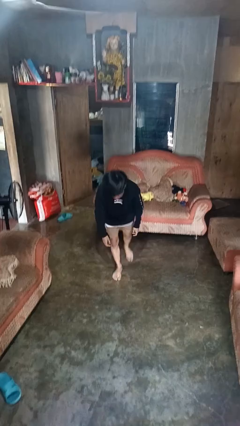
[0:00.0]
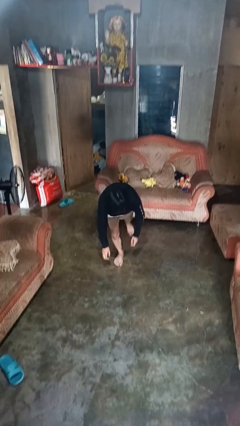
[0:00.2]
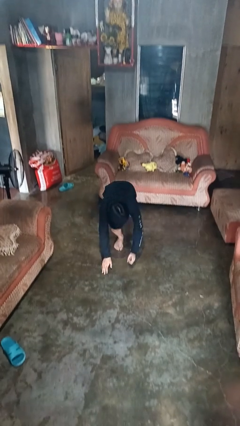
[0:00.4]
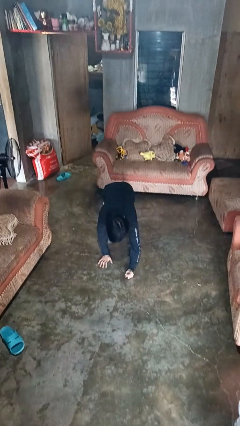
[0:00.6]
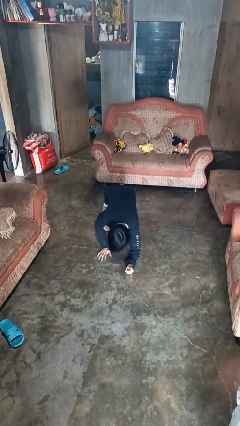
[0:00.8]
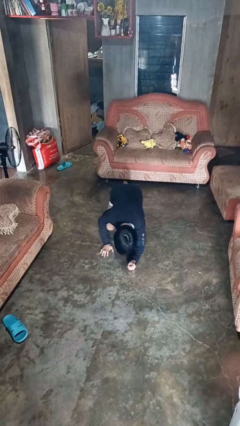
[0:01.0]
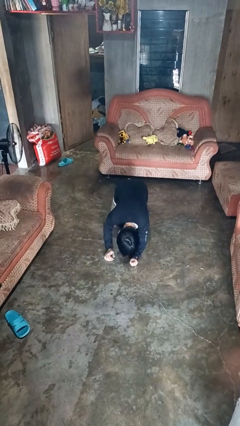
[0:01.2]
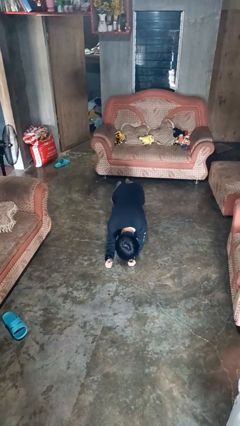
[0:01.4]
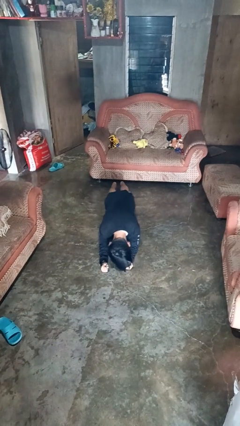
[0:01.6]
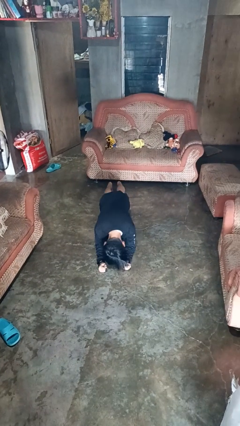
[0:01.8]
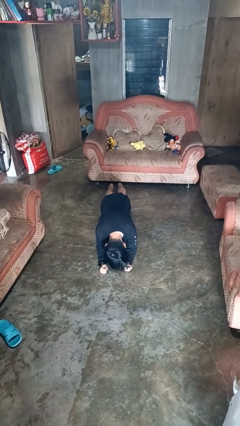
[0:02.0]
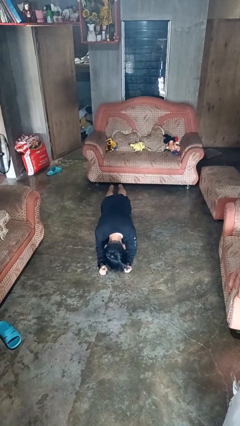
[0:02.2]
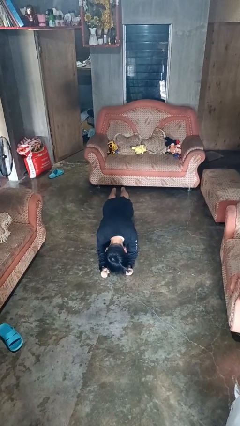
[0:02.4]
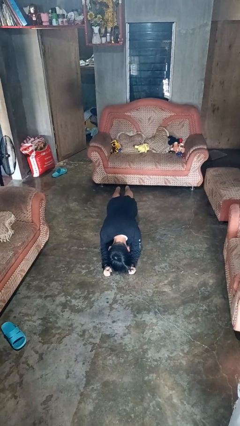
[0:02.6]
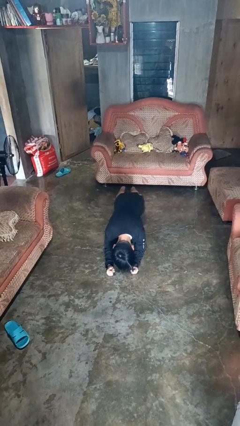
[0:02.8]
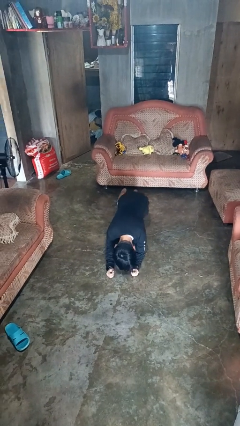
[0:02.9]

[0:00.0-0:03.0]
person exercises with plank

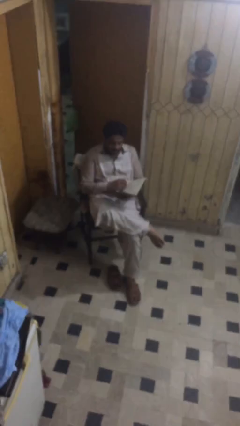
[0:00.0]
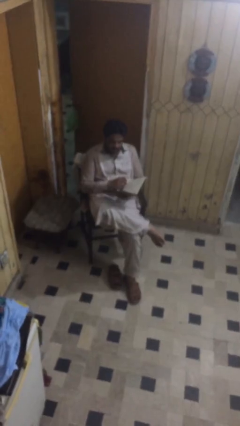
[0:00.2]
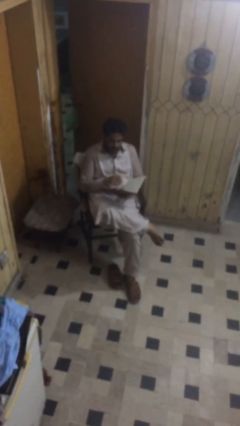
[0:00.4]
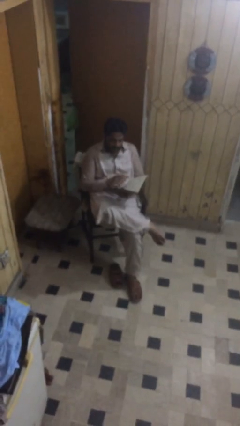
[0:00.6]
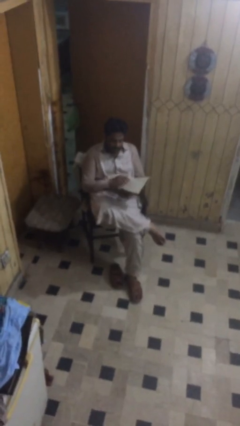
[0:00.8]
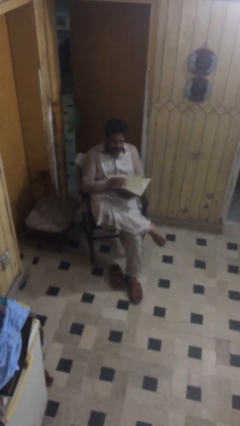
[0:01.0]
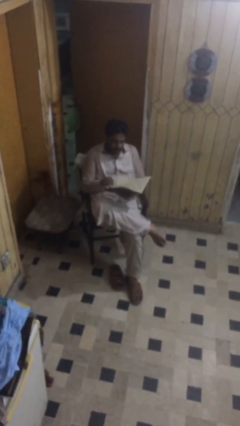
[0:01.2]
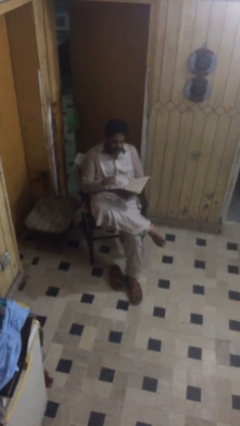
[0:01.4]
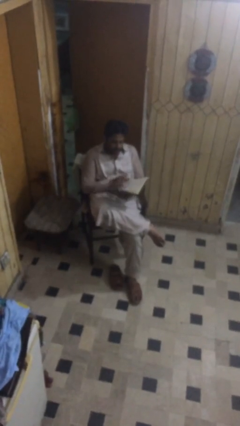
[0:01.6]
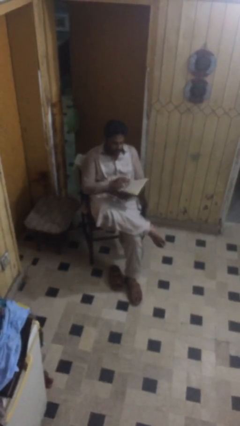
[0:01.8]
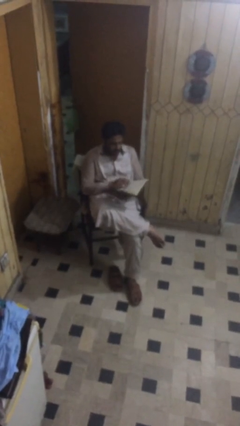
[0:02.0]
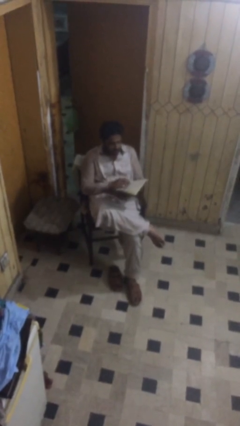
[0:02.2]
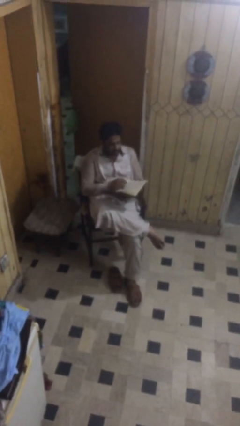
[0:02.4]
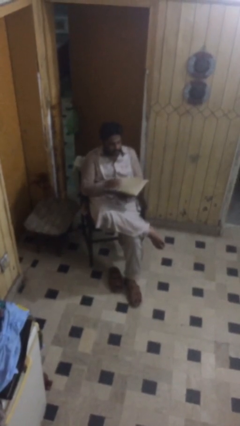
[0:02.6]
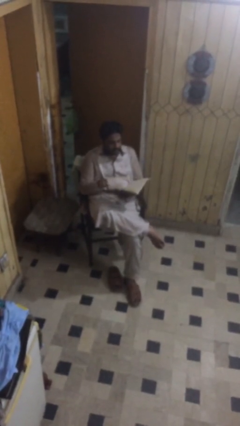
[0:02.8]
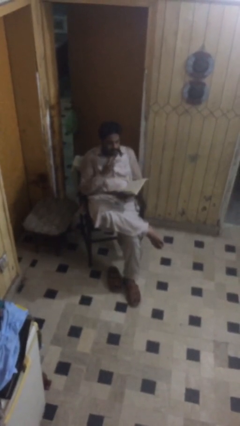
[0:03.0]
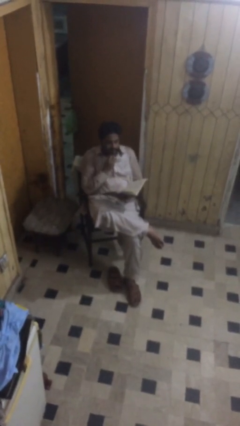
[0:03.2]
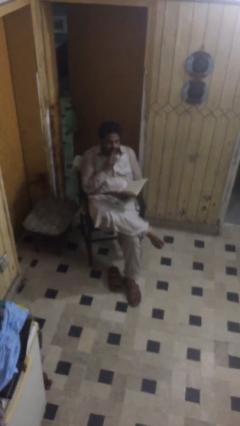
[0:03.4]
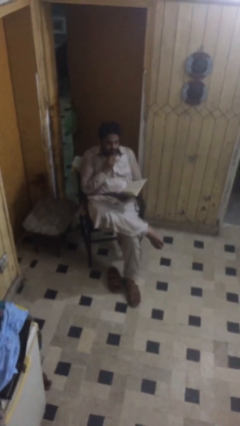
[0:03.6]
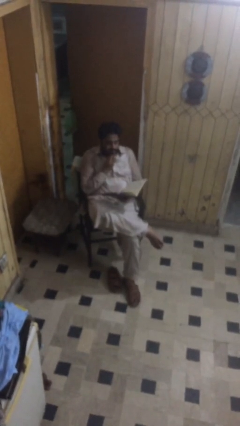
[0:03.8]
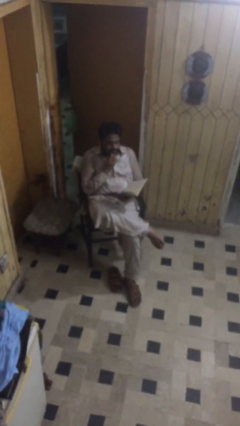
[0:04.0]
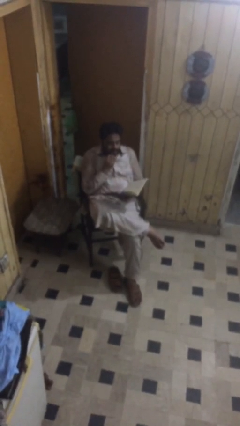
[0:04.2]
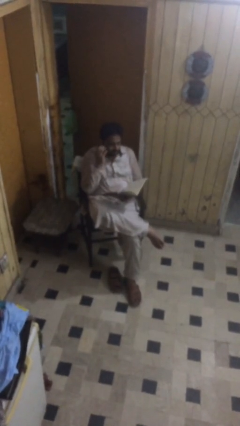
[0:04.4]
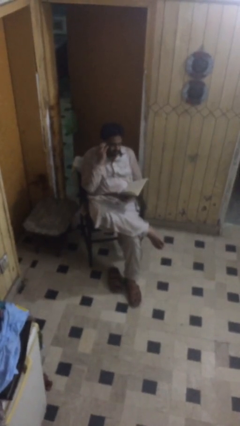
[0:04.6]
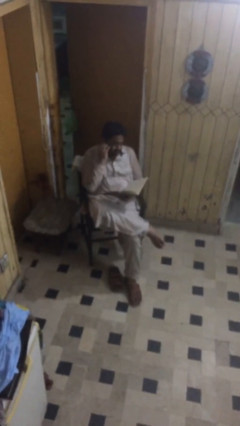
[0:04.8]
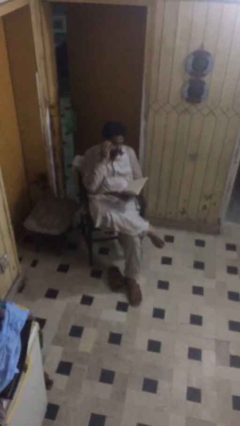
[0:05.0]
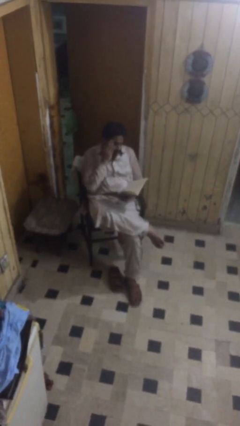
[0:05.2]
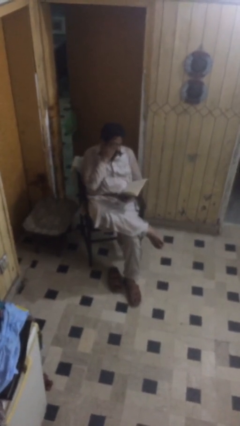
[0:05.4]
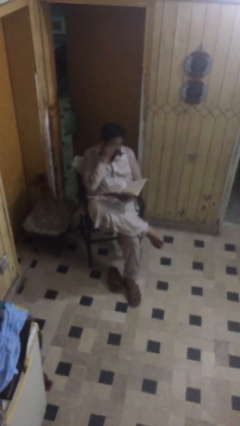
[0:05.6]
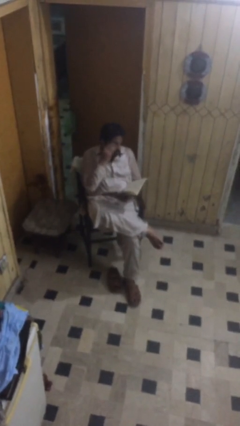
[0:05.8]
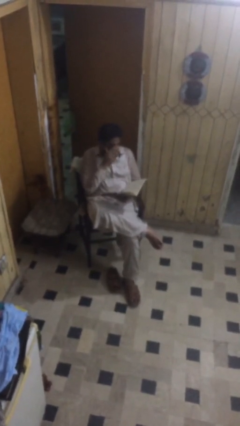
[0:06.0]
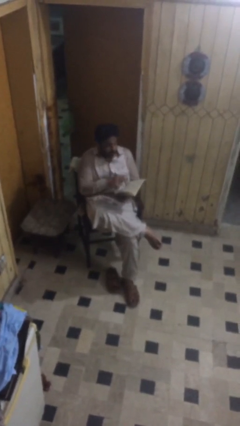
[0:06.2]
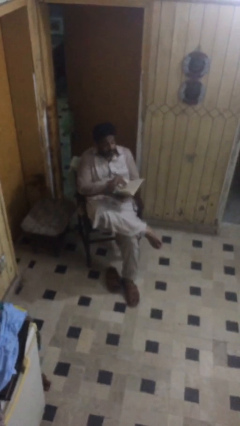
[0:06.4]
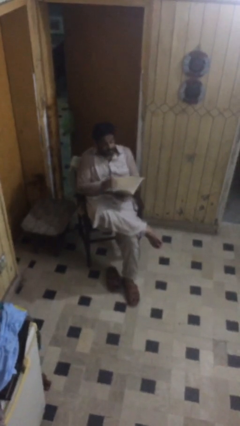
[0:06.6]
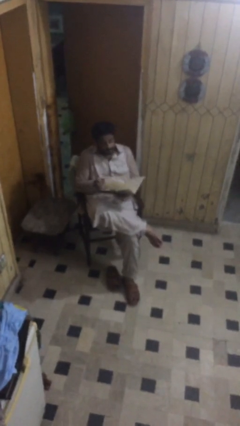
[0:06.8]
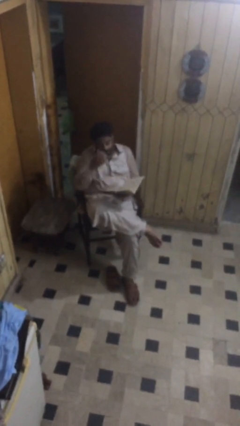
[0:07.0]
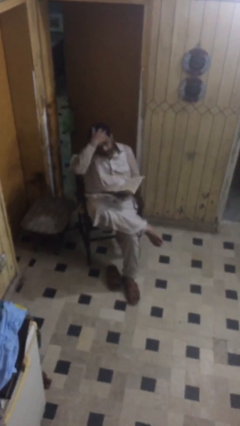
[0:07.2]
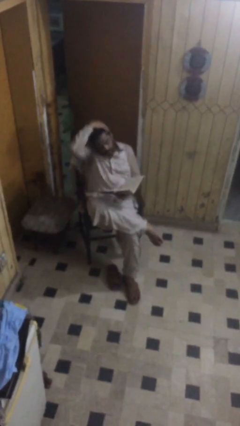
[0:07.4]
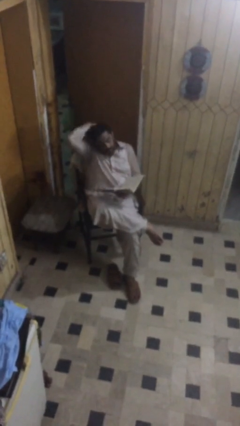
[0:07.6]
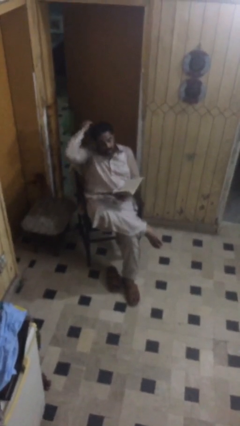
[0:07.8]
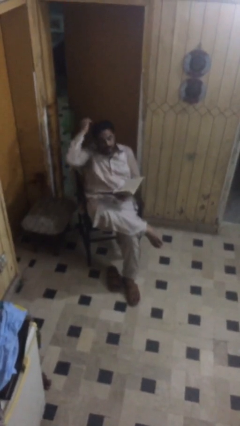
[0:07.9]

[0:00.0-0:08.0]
person reads document

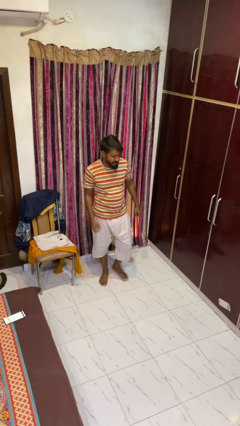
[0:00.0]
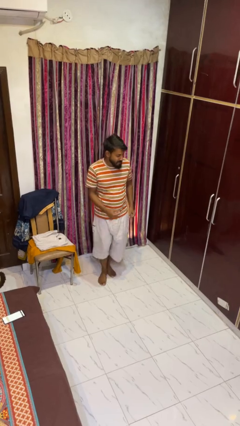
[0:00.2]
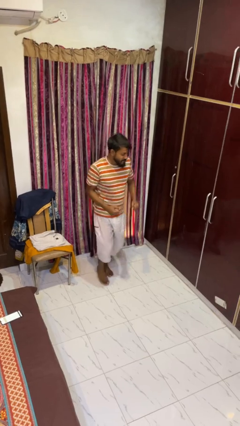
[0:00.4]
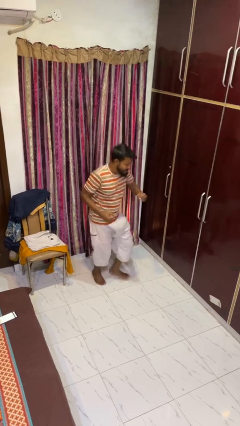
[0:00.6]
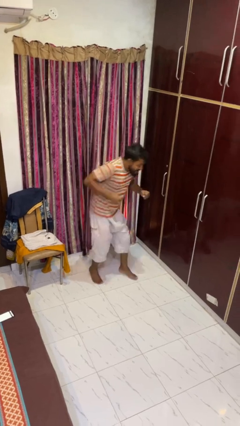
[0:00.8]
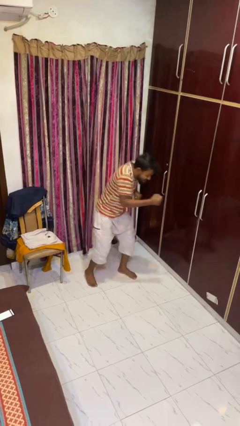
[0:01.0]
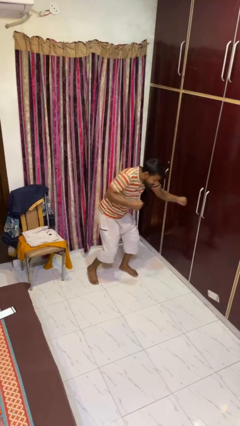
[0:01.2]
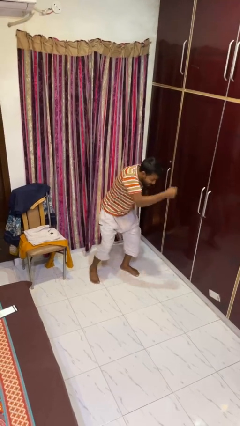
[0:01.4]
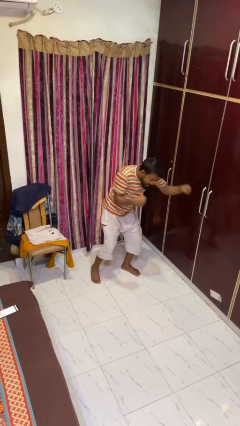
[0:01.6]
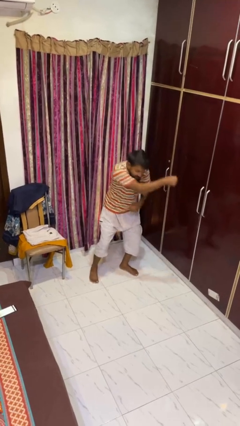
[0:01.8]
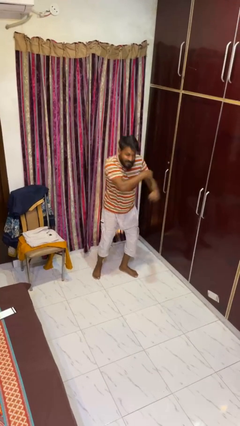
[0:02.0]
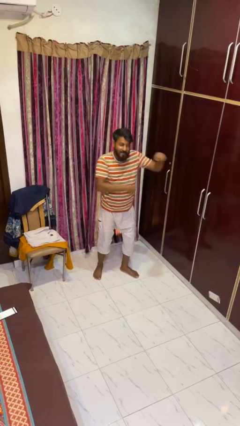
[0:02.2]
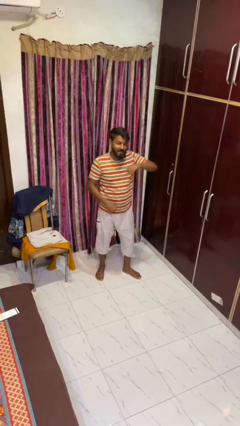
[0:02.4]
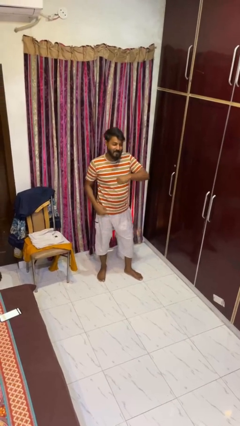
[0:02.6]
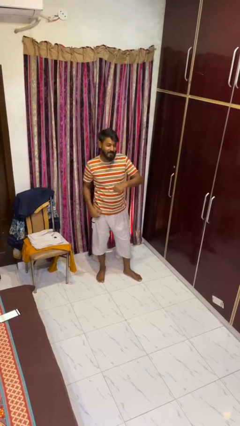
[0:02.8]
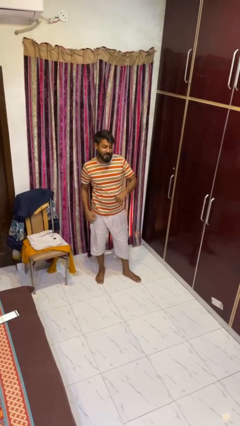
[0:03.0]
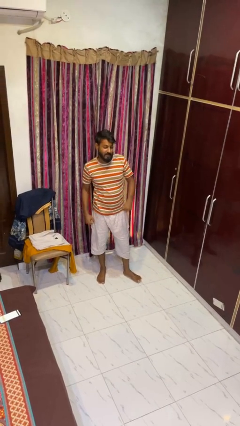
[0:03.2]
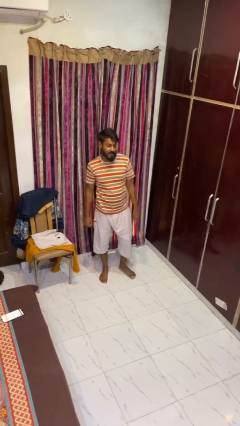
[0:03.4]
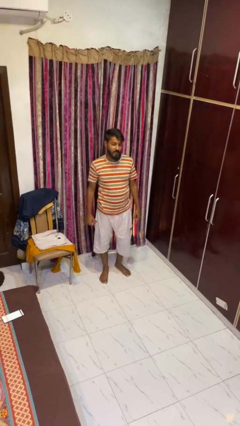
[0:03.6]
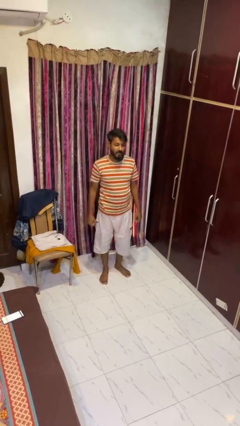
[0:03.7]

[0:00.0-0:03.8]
person punches

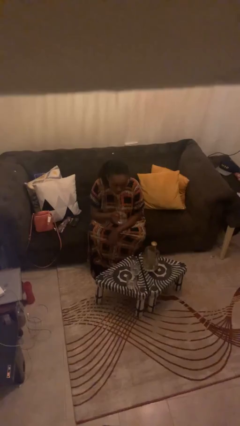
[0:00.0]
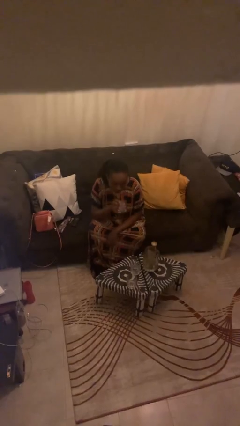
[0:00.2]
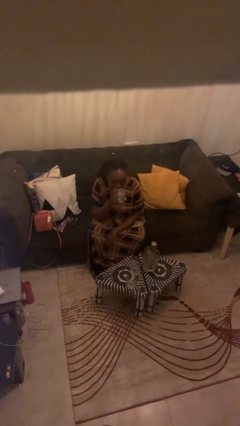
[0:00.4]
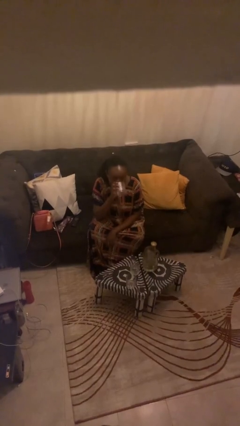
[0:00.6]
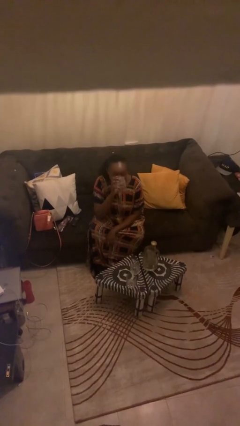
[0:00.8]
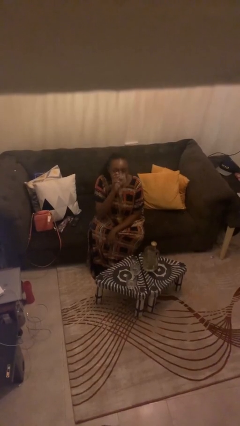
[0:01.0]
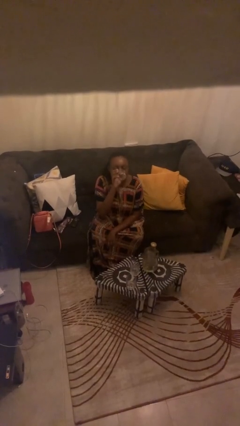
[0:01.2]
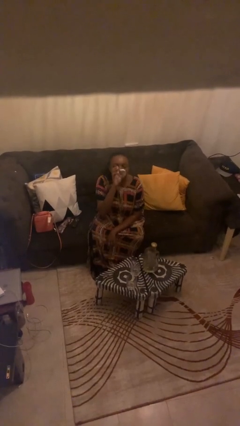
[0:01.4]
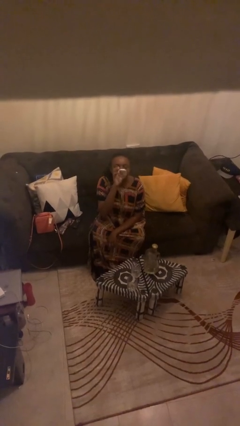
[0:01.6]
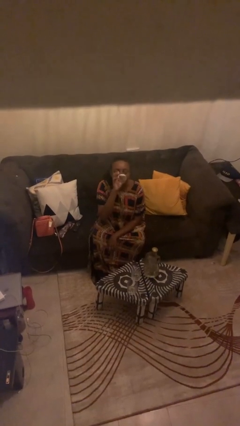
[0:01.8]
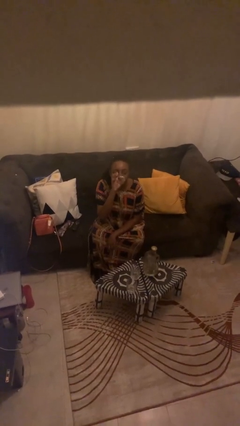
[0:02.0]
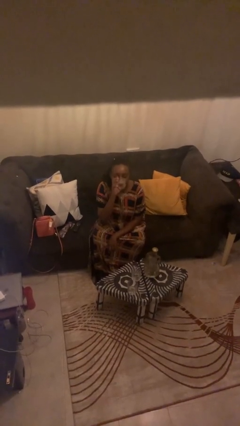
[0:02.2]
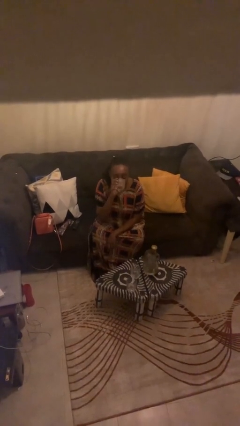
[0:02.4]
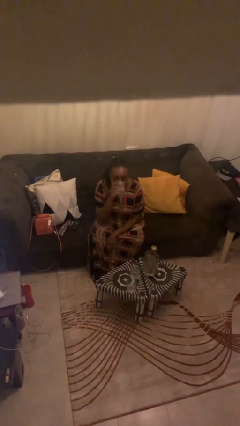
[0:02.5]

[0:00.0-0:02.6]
person drinks from shotglass

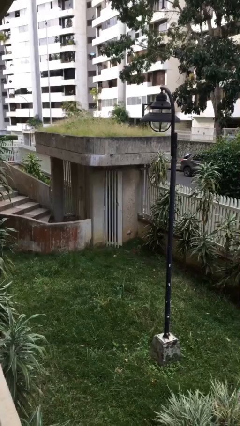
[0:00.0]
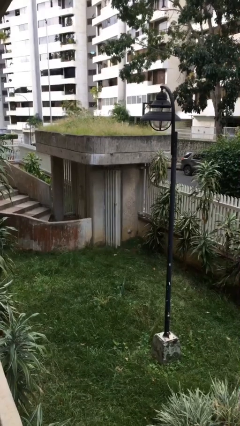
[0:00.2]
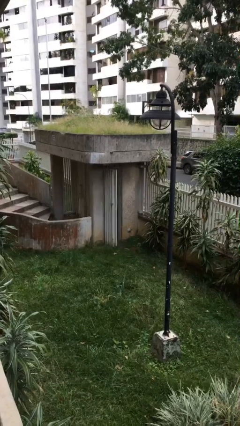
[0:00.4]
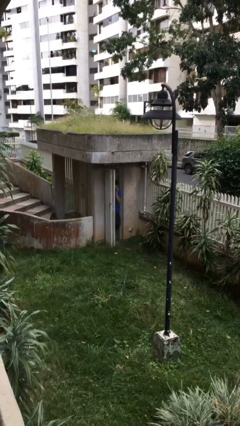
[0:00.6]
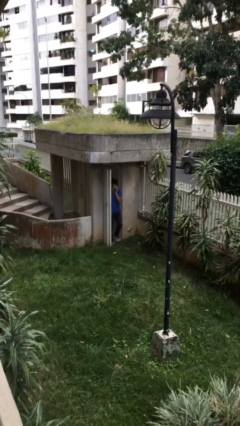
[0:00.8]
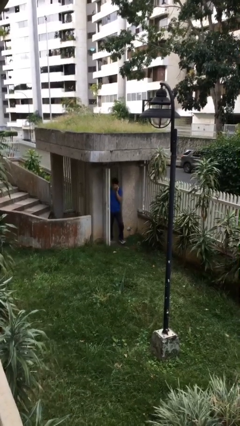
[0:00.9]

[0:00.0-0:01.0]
person opens facility door
